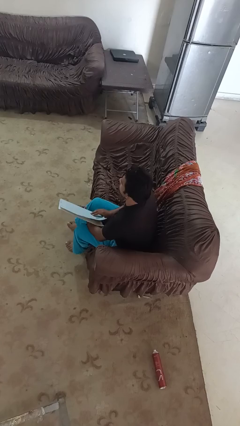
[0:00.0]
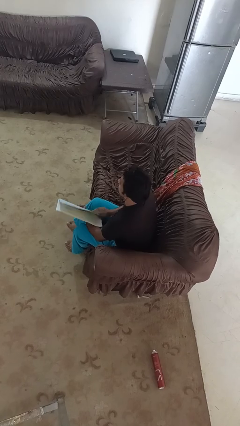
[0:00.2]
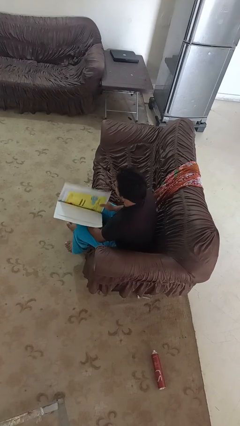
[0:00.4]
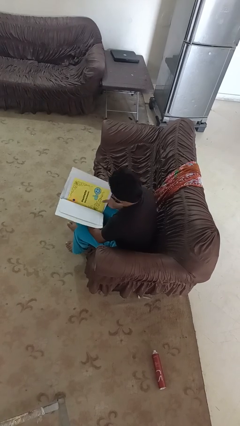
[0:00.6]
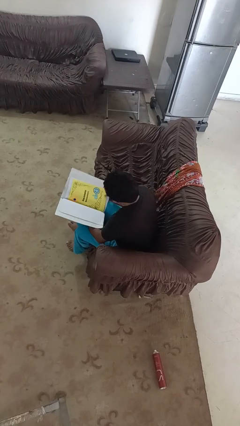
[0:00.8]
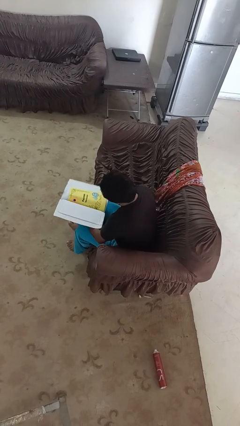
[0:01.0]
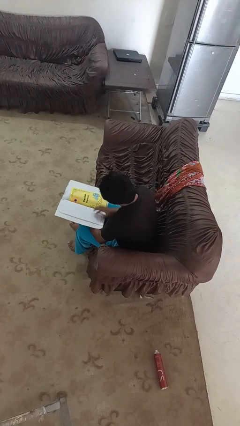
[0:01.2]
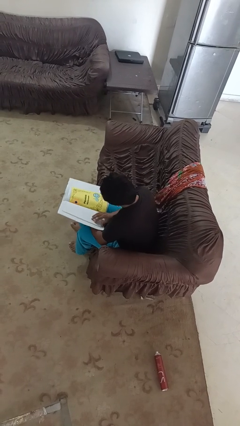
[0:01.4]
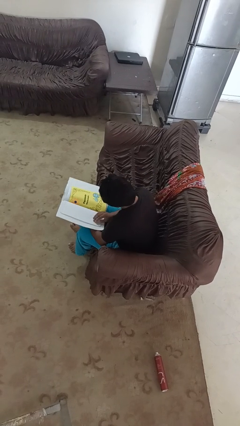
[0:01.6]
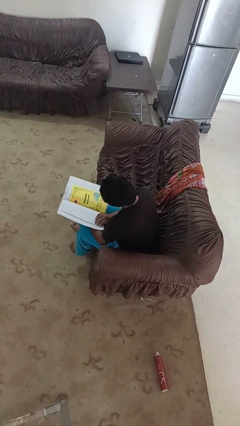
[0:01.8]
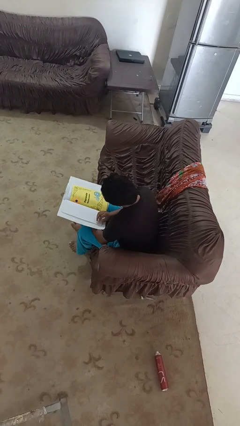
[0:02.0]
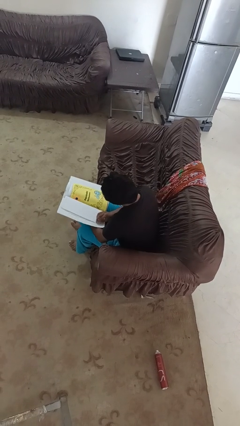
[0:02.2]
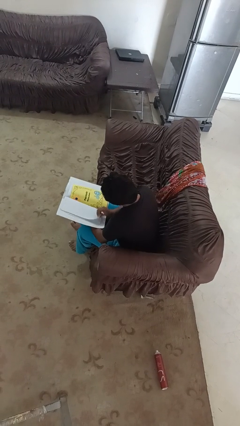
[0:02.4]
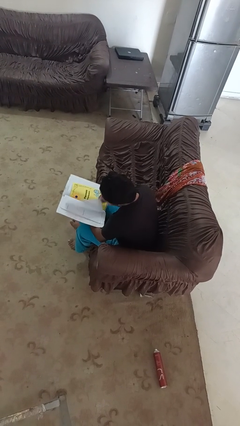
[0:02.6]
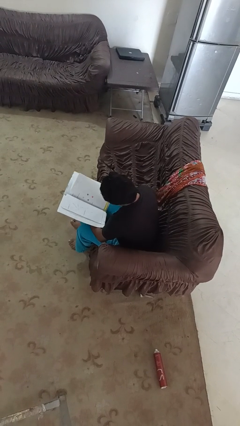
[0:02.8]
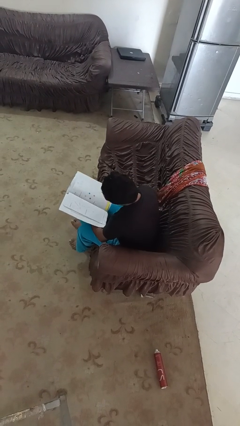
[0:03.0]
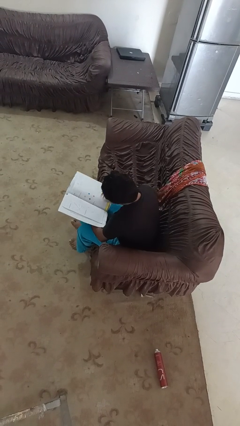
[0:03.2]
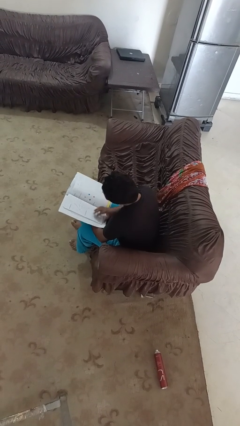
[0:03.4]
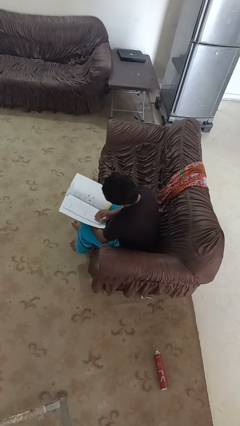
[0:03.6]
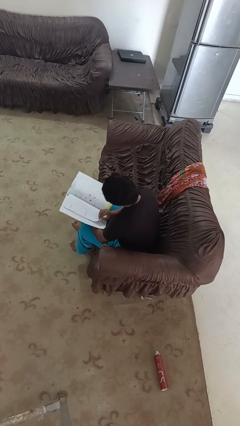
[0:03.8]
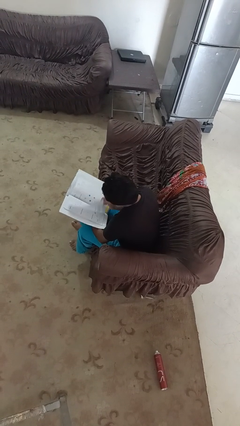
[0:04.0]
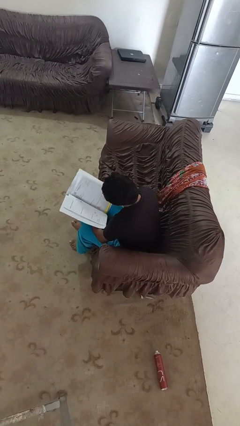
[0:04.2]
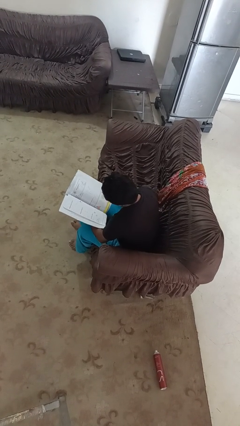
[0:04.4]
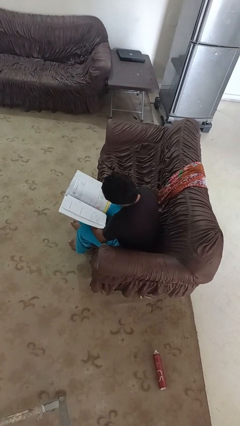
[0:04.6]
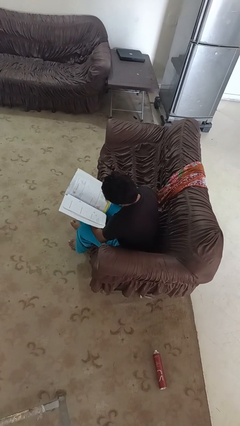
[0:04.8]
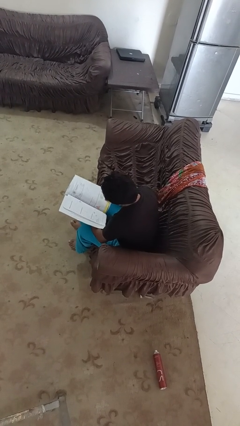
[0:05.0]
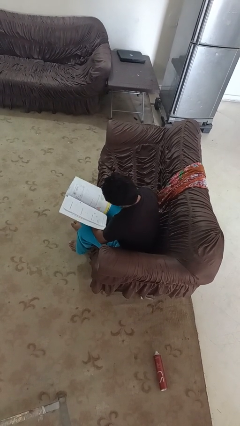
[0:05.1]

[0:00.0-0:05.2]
person reads magazine

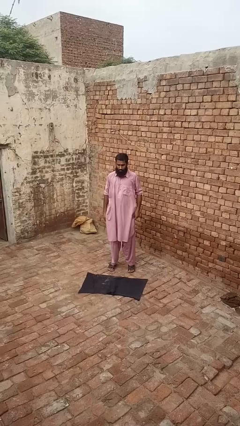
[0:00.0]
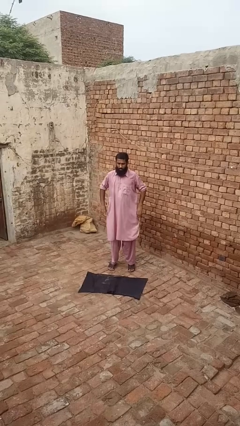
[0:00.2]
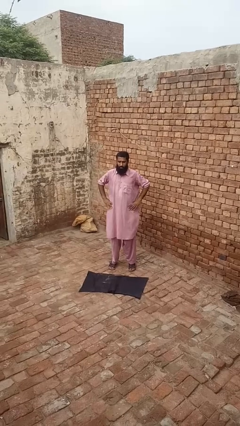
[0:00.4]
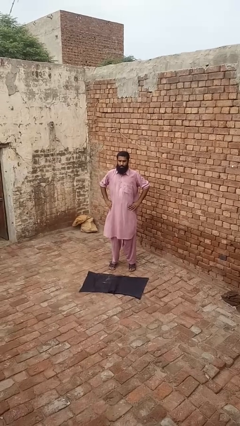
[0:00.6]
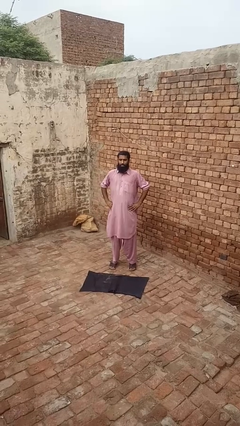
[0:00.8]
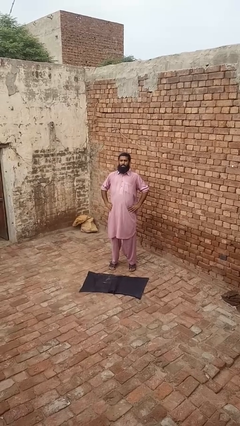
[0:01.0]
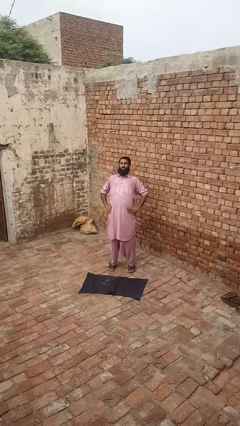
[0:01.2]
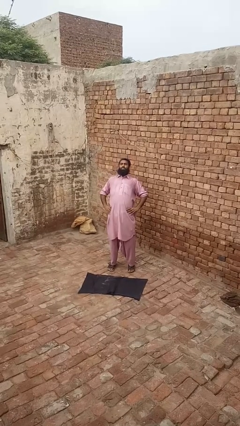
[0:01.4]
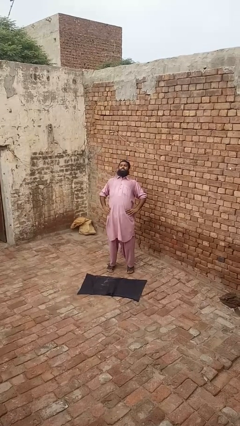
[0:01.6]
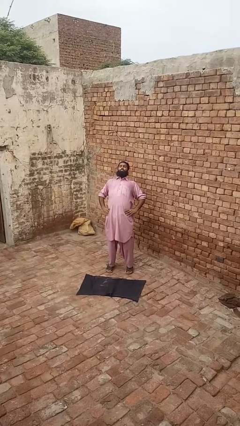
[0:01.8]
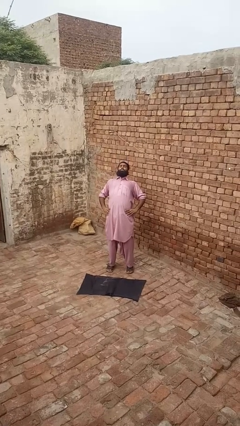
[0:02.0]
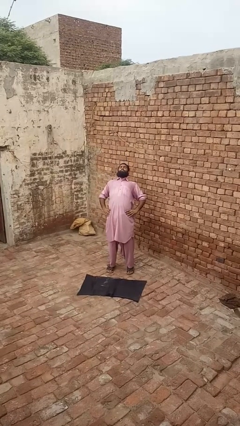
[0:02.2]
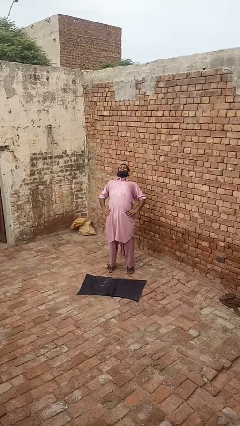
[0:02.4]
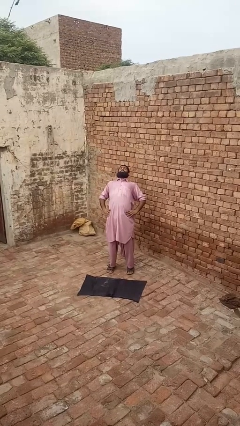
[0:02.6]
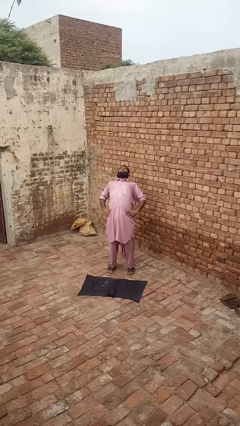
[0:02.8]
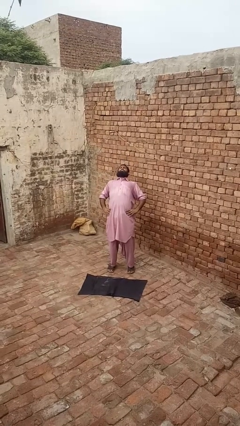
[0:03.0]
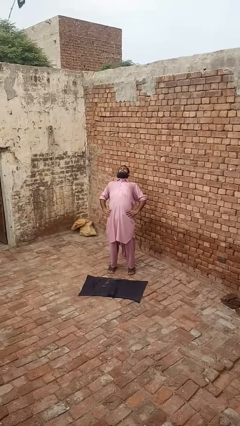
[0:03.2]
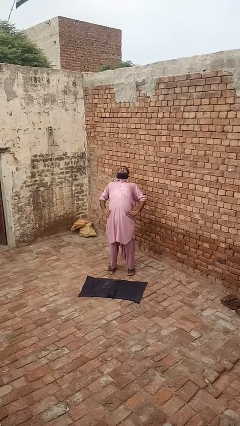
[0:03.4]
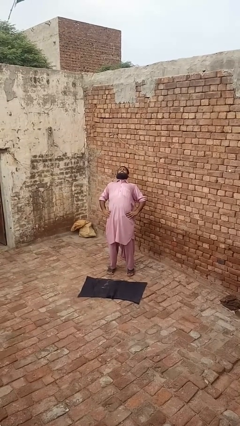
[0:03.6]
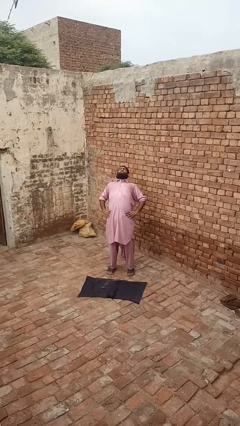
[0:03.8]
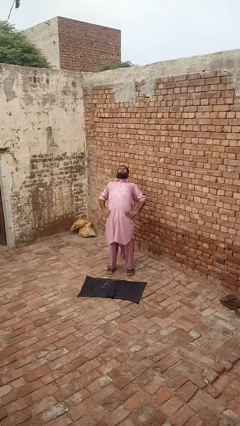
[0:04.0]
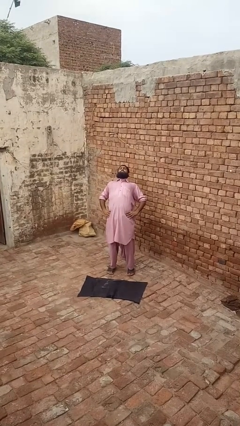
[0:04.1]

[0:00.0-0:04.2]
person stretches back

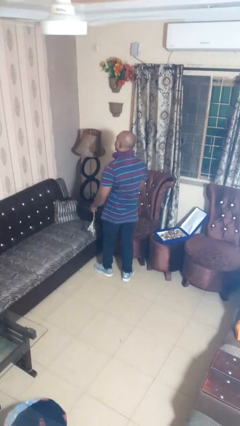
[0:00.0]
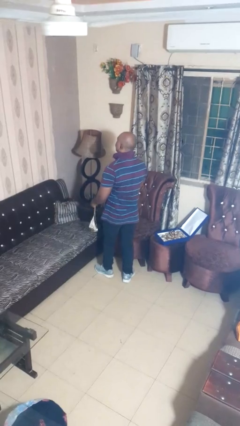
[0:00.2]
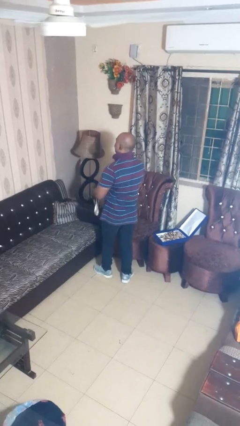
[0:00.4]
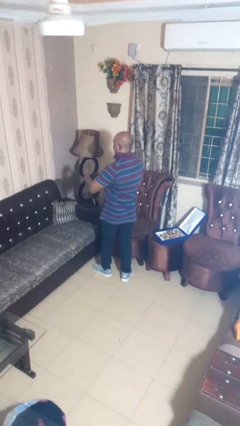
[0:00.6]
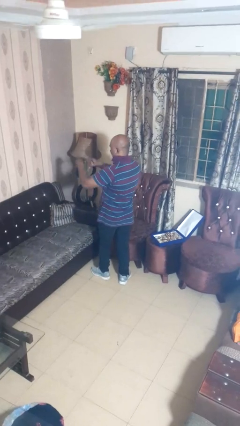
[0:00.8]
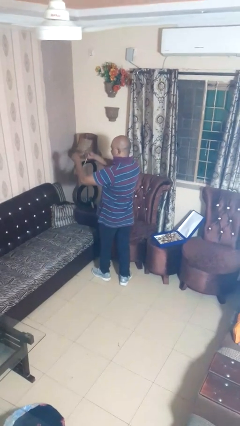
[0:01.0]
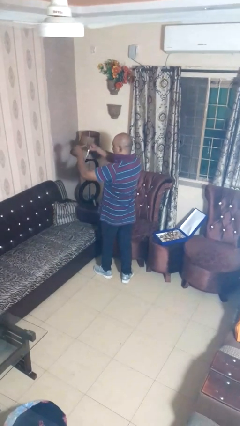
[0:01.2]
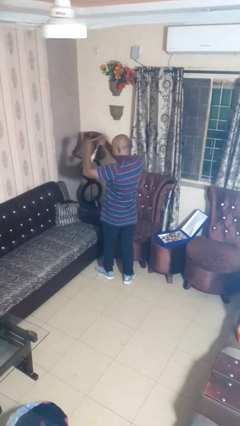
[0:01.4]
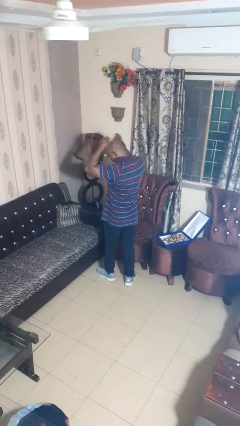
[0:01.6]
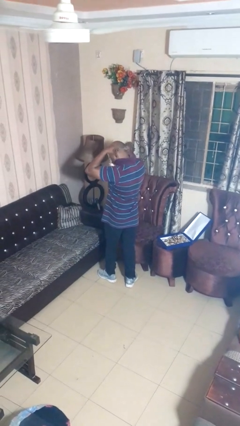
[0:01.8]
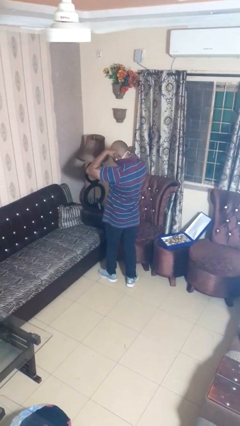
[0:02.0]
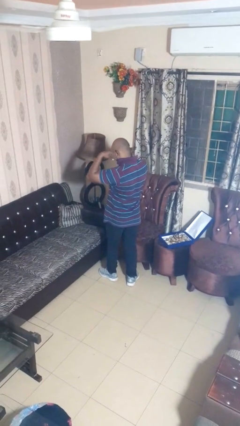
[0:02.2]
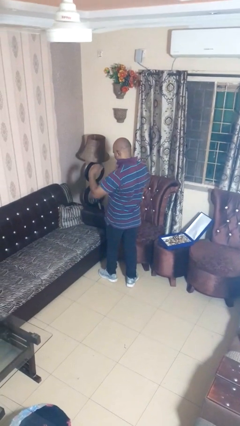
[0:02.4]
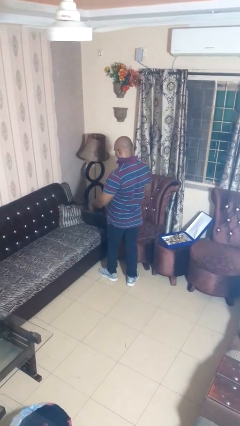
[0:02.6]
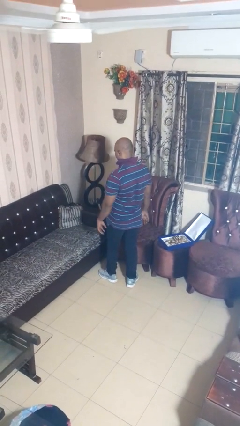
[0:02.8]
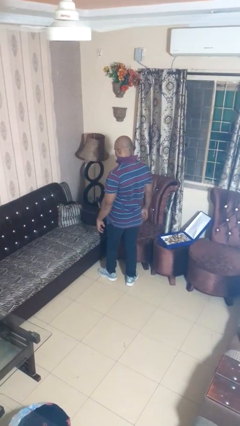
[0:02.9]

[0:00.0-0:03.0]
person puts on necklace

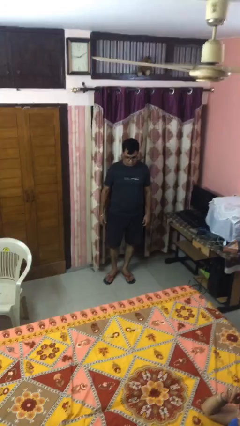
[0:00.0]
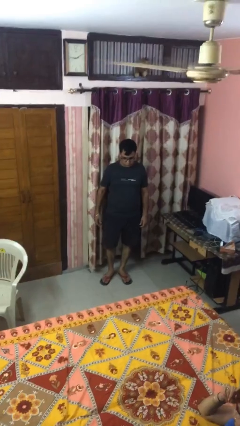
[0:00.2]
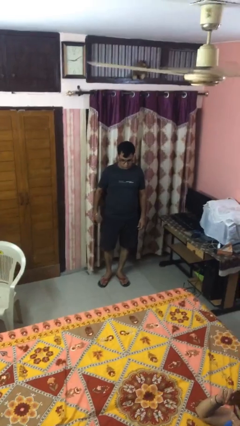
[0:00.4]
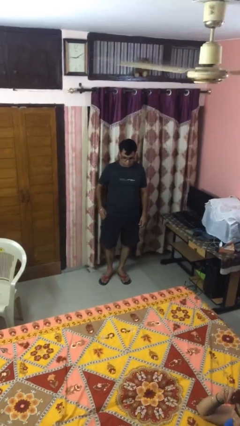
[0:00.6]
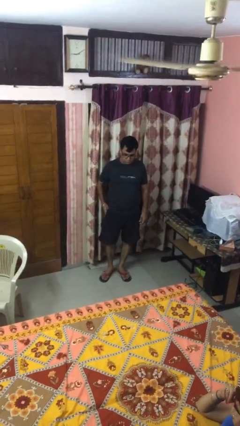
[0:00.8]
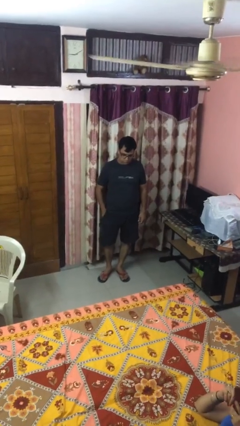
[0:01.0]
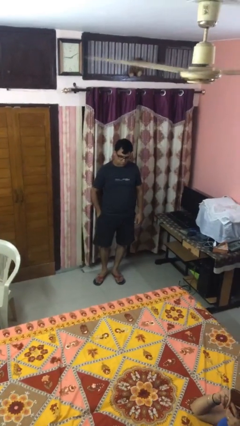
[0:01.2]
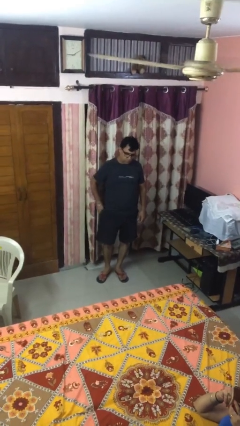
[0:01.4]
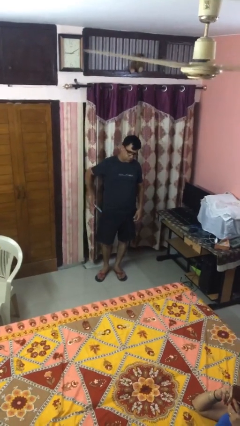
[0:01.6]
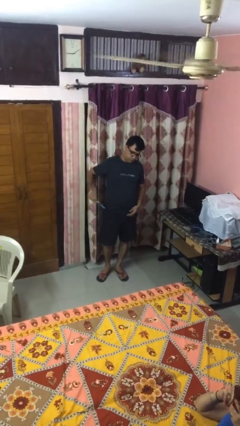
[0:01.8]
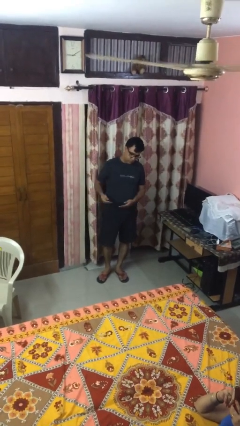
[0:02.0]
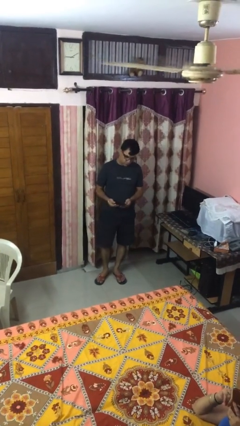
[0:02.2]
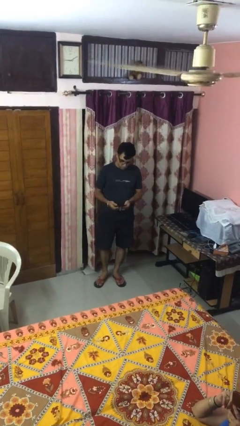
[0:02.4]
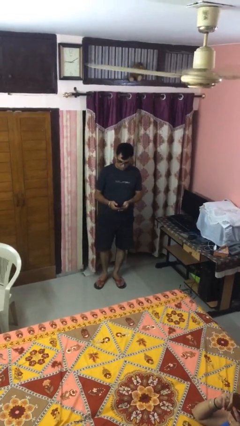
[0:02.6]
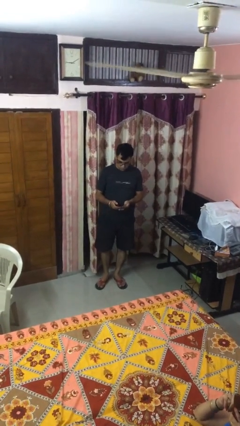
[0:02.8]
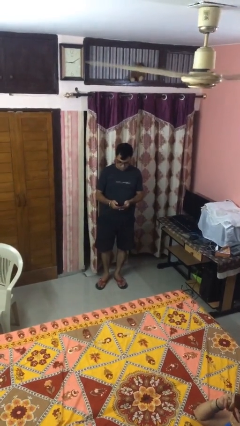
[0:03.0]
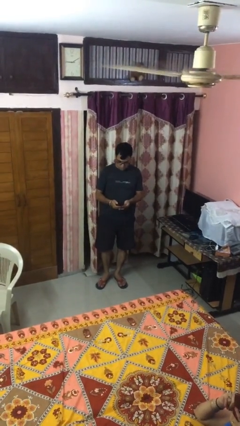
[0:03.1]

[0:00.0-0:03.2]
person takes phone from pocket

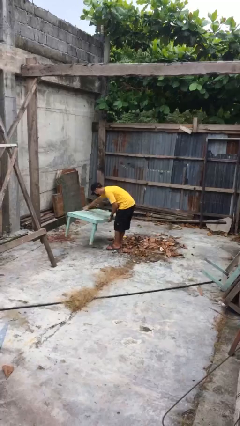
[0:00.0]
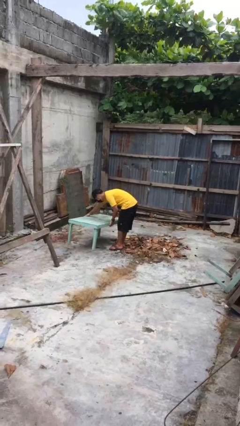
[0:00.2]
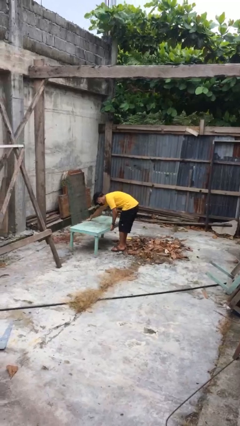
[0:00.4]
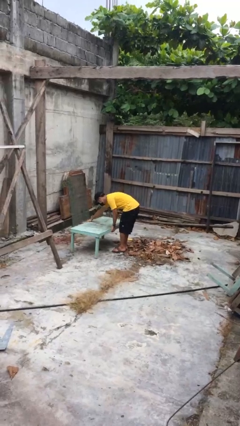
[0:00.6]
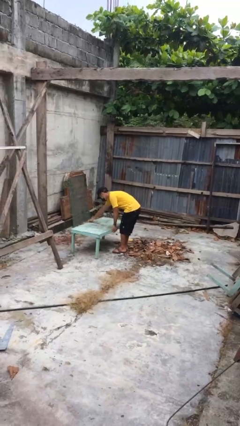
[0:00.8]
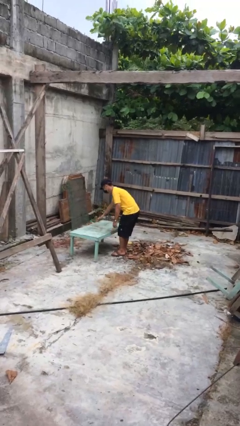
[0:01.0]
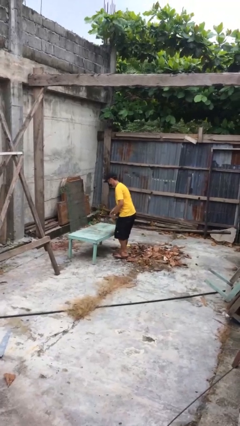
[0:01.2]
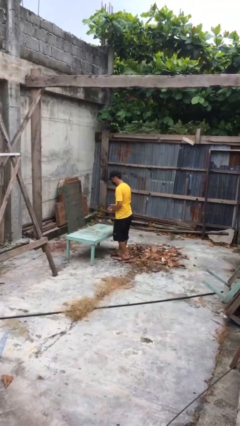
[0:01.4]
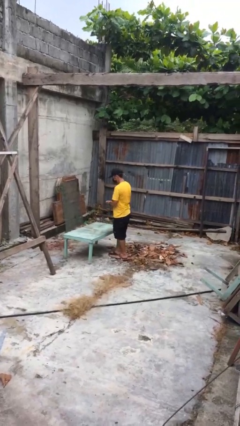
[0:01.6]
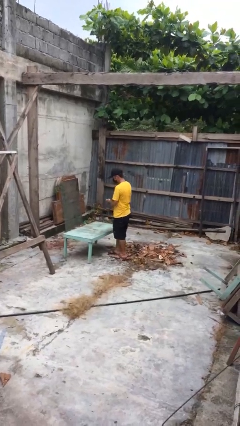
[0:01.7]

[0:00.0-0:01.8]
person puts down object on floor
